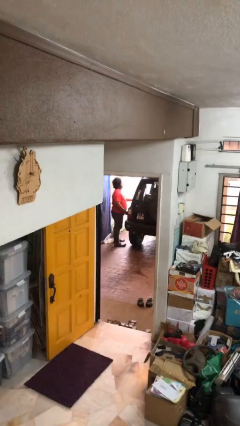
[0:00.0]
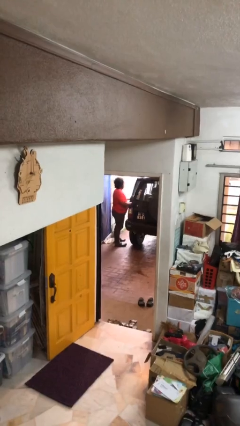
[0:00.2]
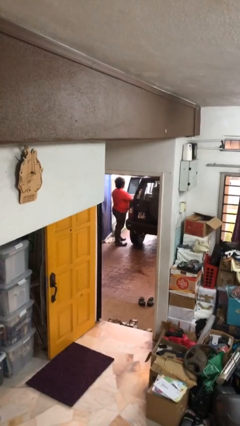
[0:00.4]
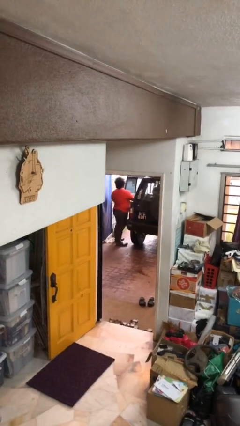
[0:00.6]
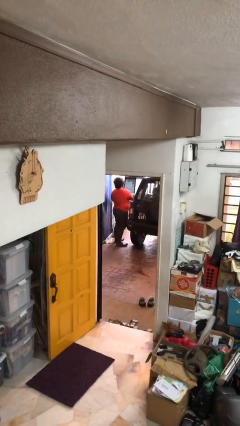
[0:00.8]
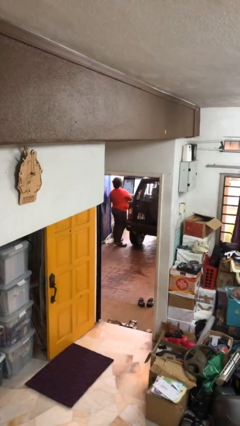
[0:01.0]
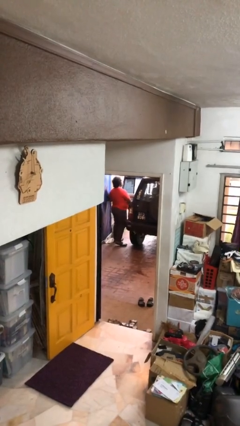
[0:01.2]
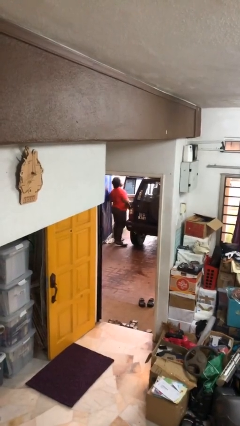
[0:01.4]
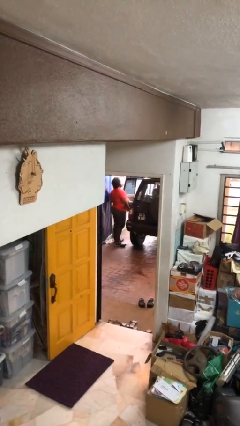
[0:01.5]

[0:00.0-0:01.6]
person opens car door

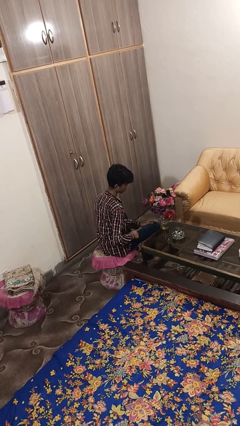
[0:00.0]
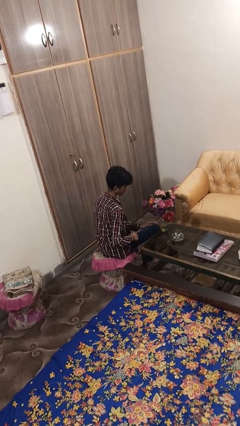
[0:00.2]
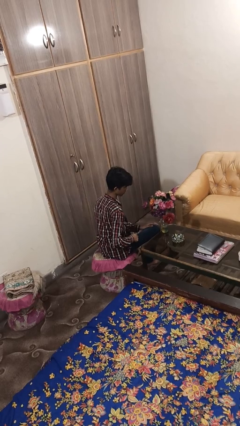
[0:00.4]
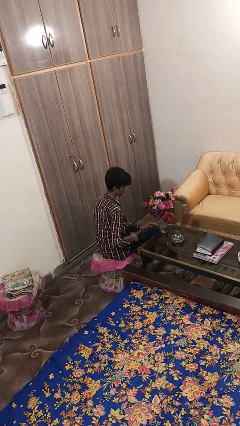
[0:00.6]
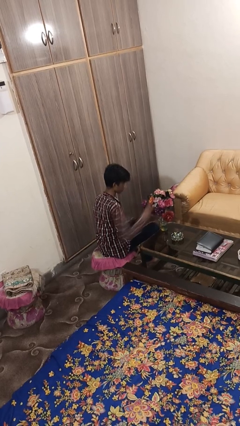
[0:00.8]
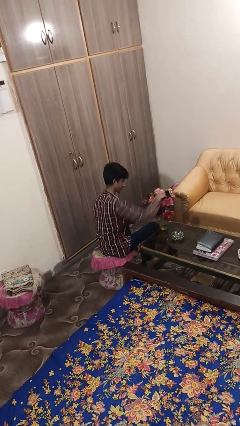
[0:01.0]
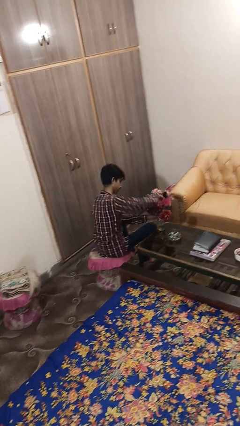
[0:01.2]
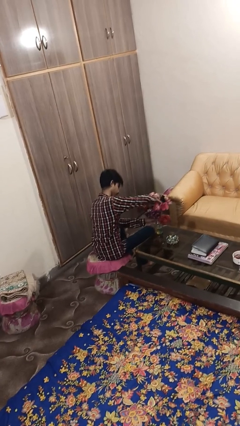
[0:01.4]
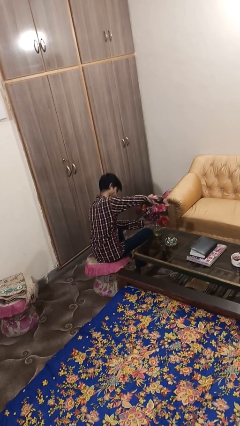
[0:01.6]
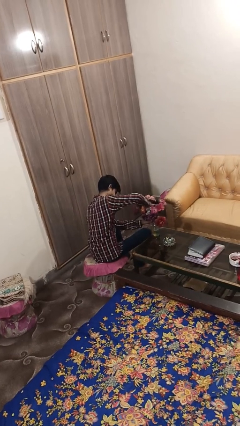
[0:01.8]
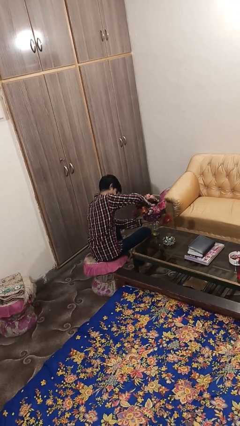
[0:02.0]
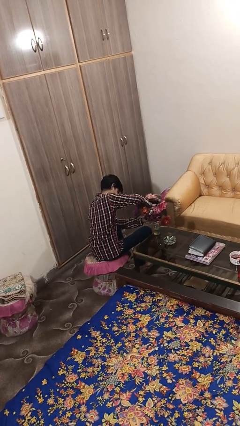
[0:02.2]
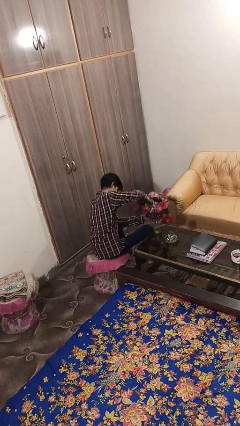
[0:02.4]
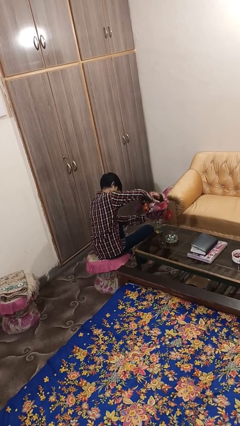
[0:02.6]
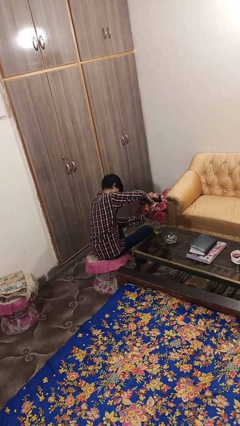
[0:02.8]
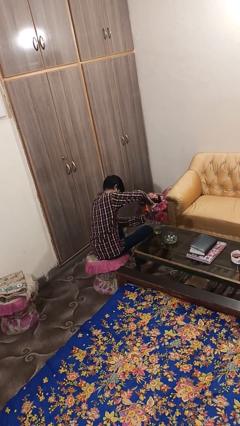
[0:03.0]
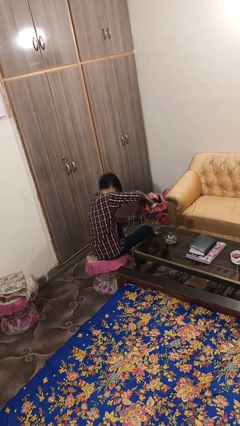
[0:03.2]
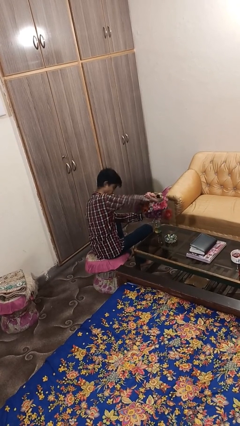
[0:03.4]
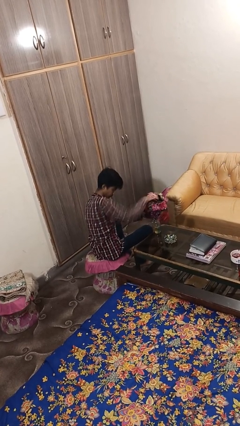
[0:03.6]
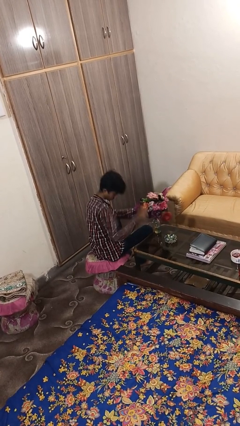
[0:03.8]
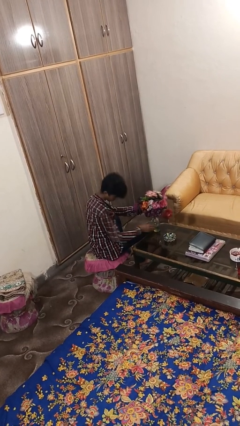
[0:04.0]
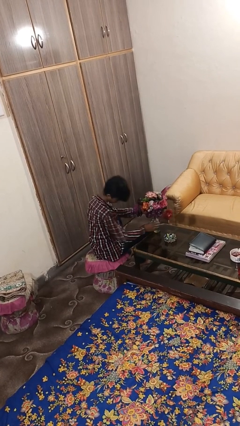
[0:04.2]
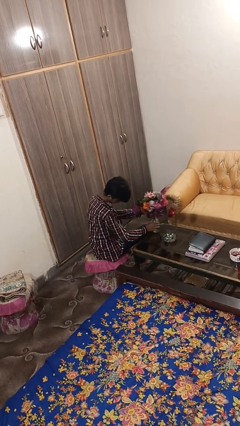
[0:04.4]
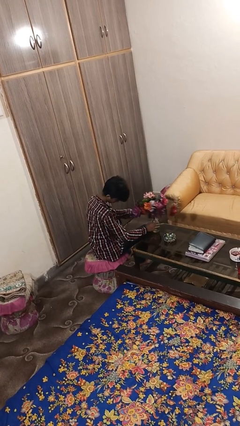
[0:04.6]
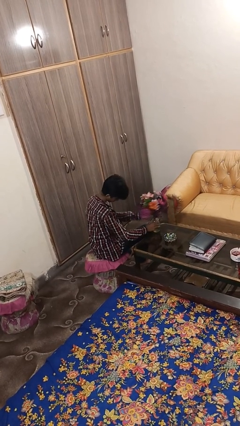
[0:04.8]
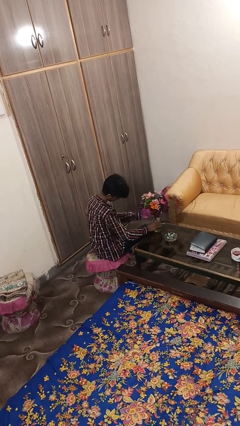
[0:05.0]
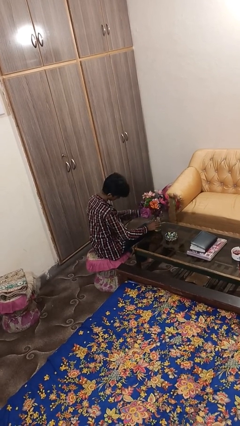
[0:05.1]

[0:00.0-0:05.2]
person arranges flowers in vase

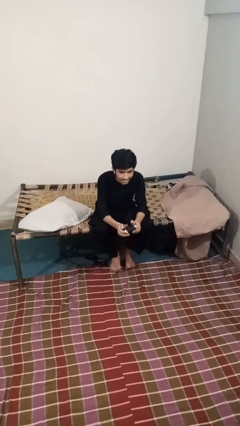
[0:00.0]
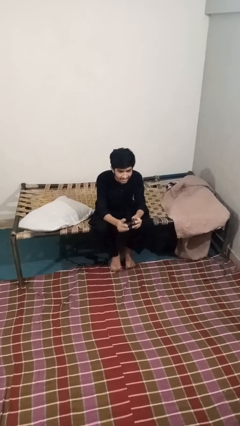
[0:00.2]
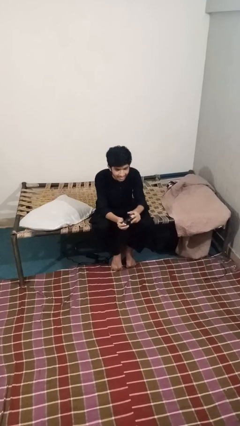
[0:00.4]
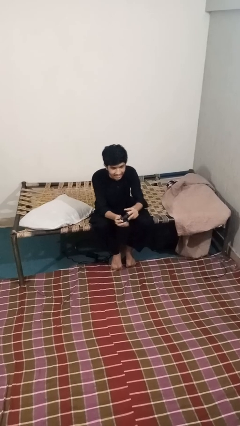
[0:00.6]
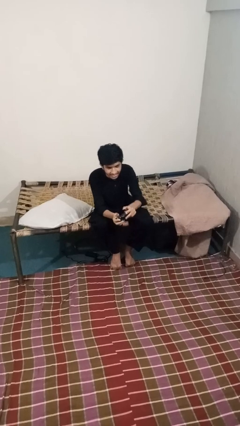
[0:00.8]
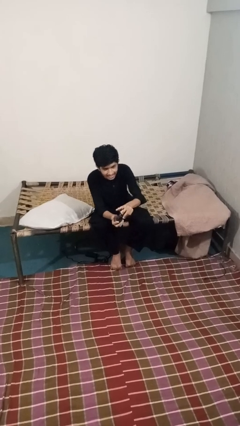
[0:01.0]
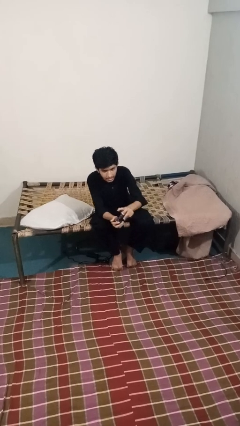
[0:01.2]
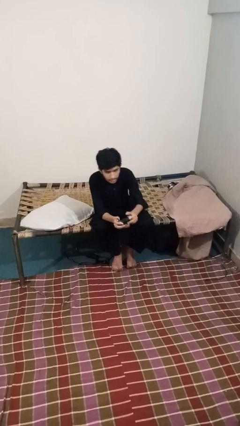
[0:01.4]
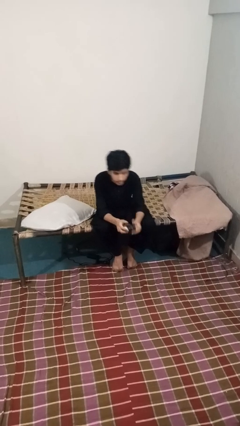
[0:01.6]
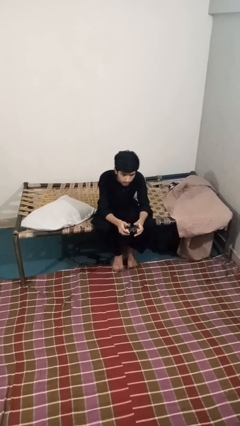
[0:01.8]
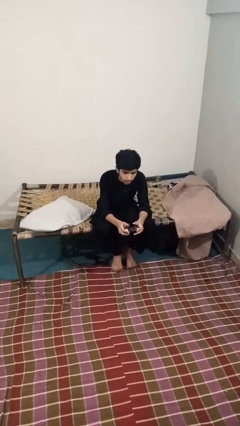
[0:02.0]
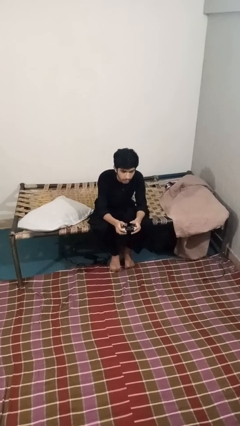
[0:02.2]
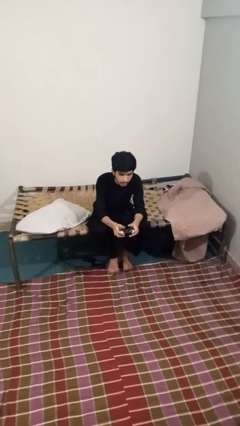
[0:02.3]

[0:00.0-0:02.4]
person interacts with handheld game

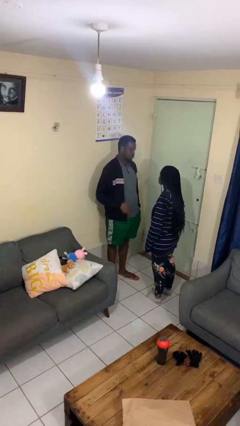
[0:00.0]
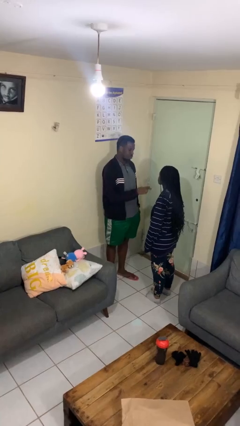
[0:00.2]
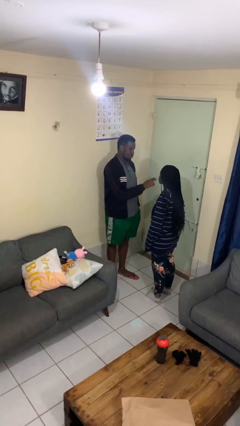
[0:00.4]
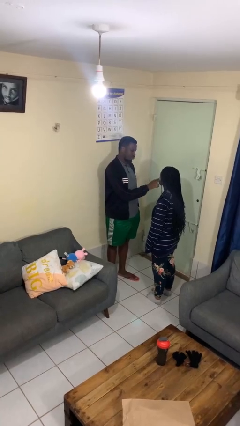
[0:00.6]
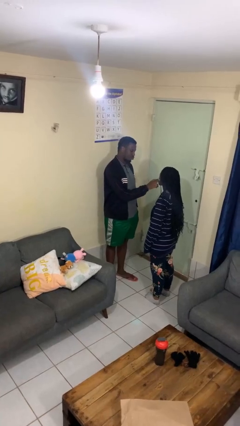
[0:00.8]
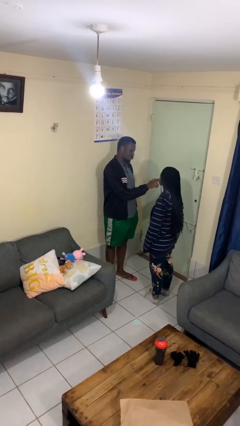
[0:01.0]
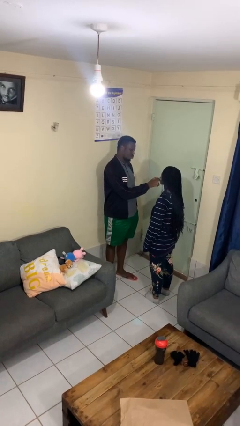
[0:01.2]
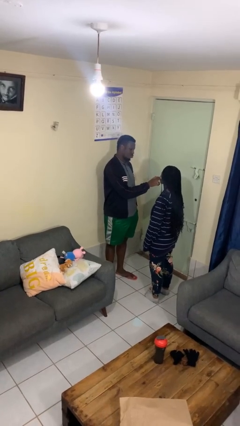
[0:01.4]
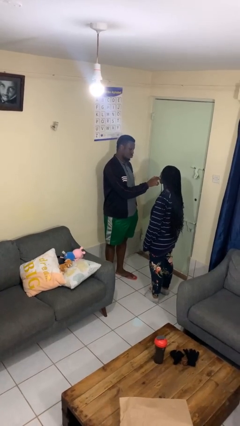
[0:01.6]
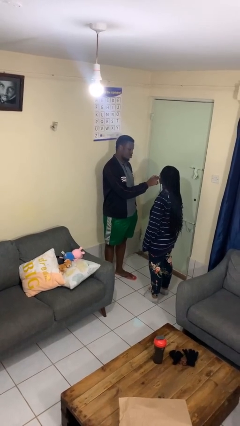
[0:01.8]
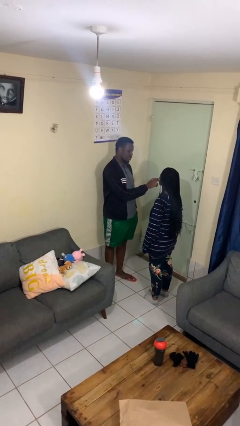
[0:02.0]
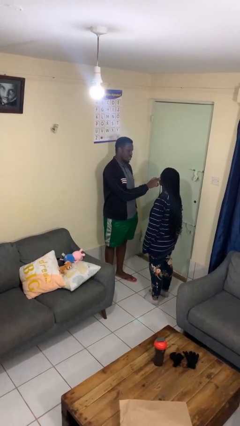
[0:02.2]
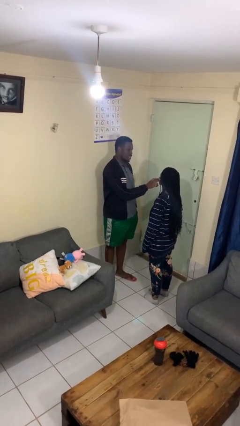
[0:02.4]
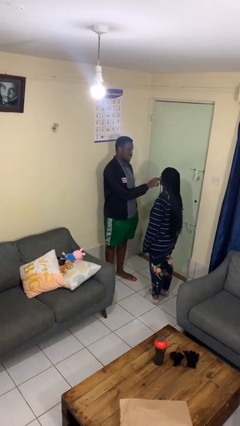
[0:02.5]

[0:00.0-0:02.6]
person touches face of person

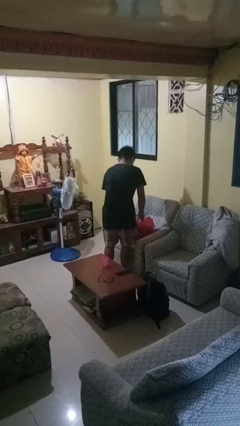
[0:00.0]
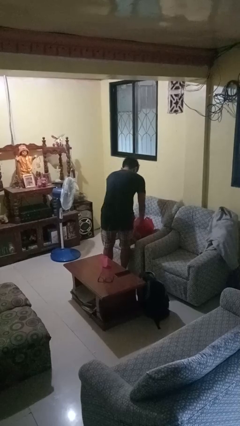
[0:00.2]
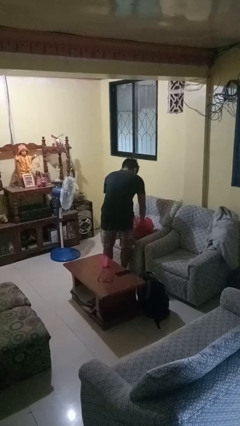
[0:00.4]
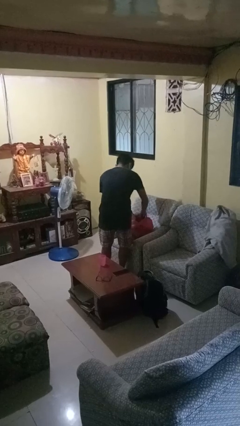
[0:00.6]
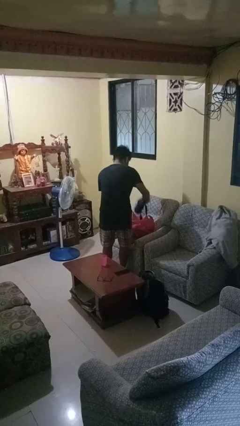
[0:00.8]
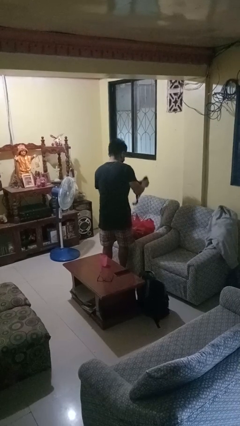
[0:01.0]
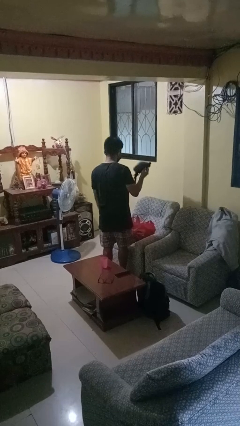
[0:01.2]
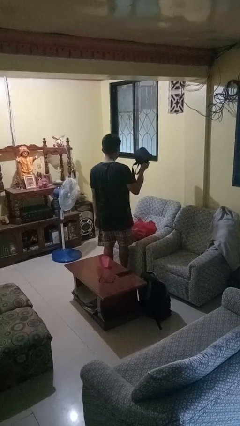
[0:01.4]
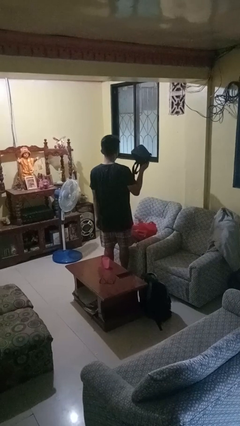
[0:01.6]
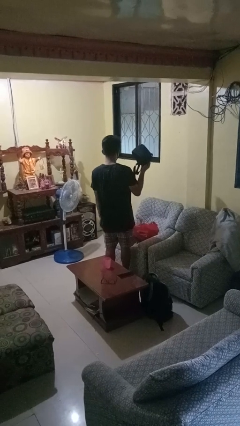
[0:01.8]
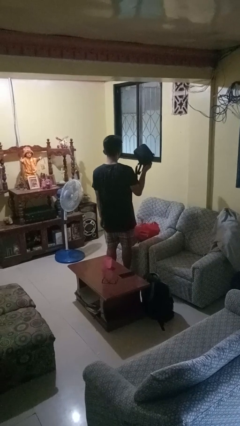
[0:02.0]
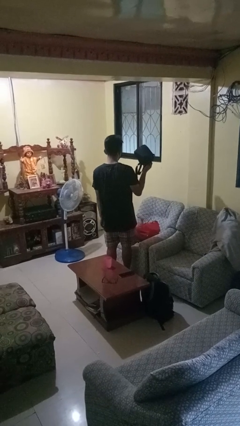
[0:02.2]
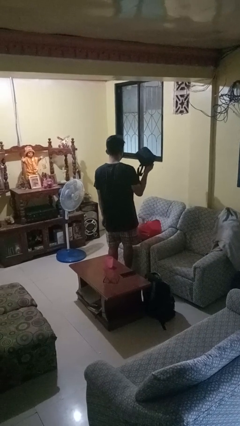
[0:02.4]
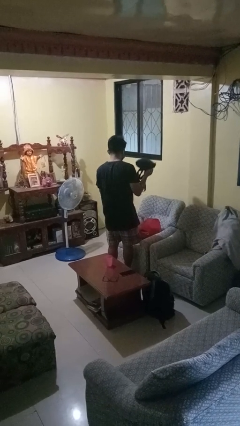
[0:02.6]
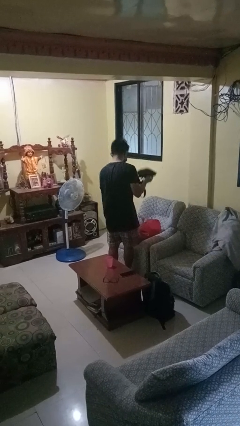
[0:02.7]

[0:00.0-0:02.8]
person takes object from bag

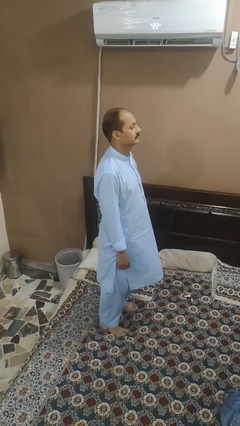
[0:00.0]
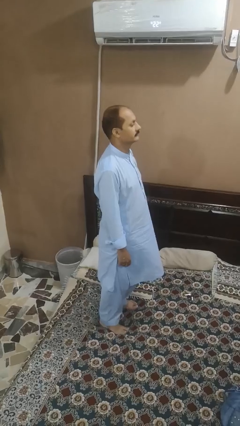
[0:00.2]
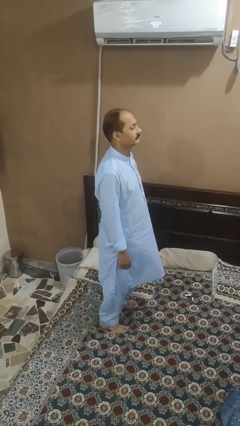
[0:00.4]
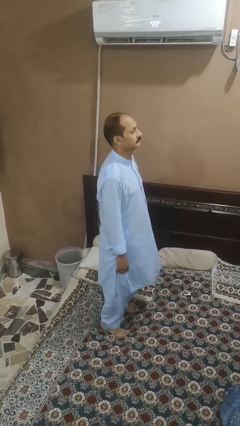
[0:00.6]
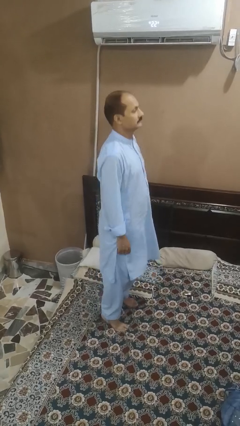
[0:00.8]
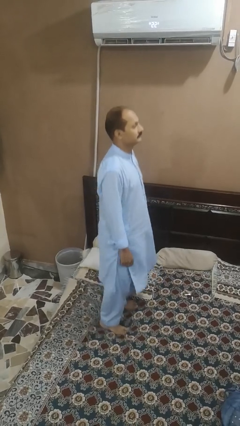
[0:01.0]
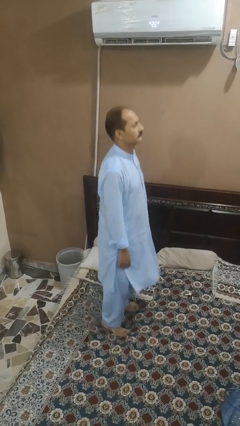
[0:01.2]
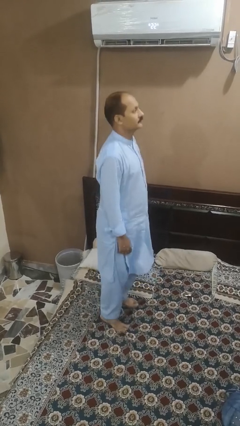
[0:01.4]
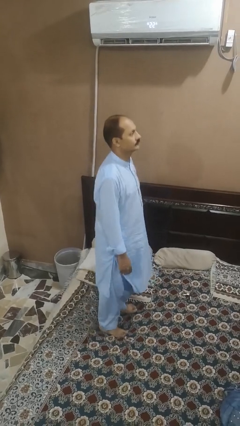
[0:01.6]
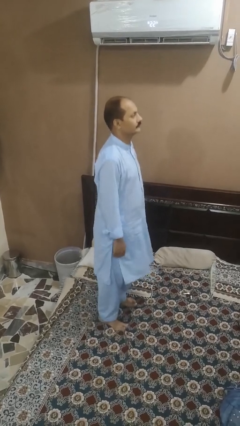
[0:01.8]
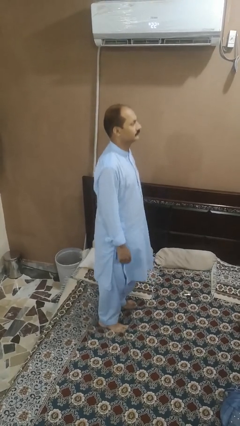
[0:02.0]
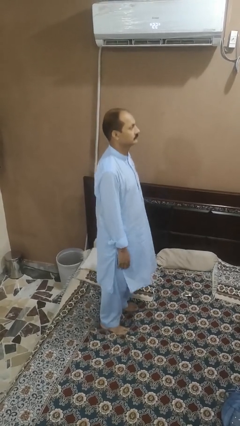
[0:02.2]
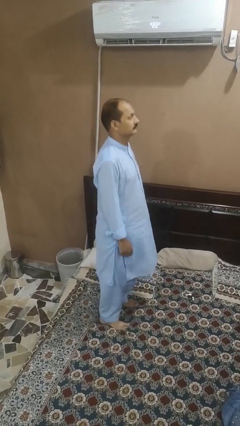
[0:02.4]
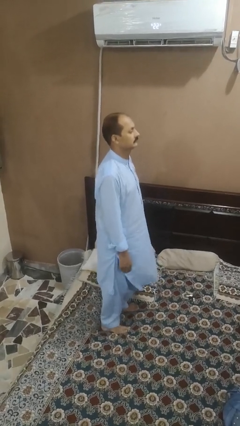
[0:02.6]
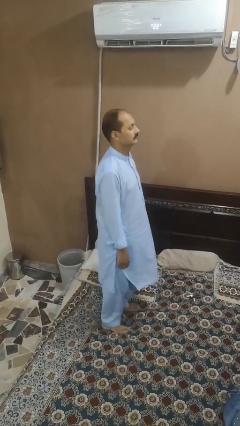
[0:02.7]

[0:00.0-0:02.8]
person jumps on bed
